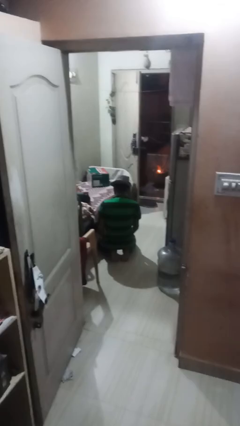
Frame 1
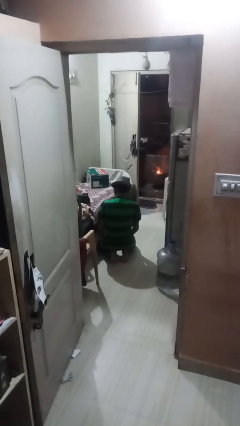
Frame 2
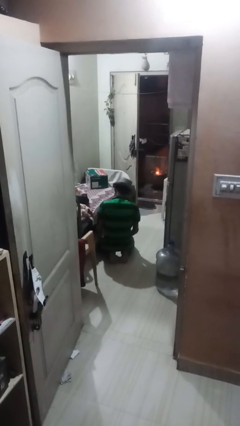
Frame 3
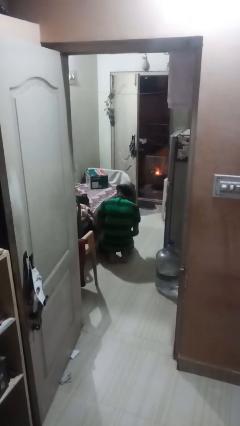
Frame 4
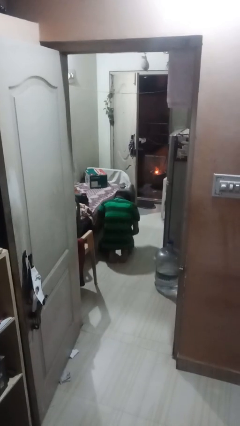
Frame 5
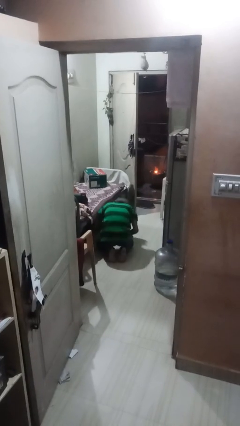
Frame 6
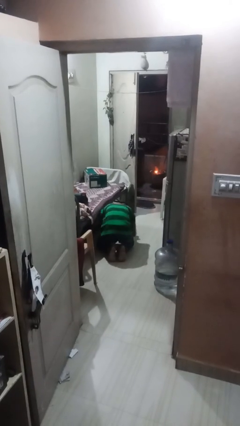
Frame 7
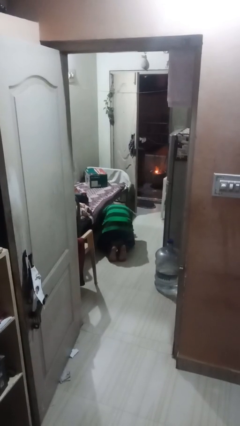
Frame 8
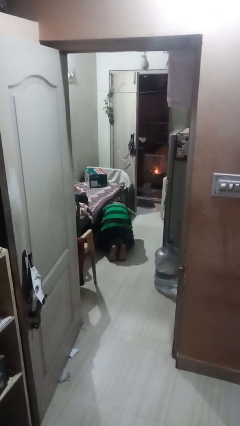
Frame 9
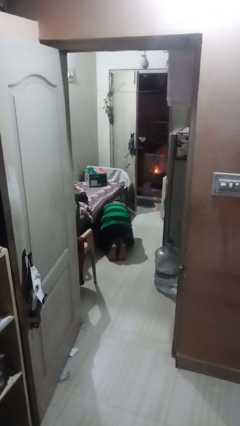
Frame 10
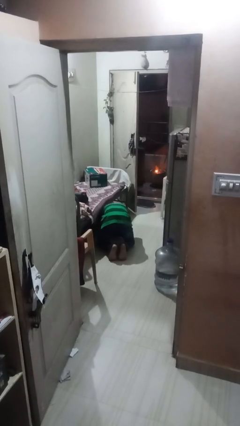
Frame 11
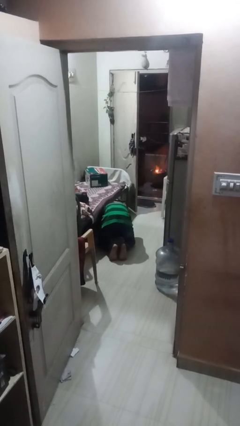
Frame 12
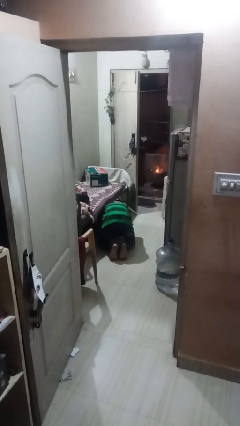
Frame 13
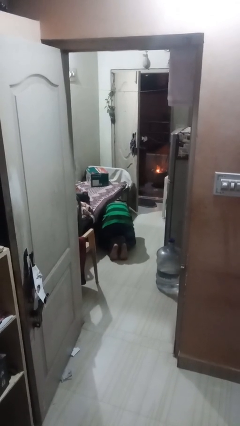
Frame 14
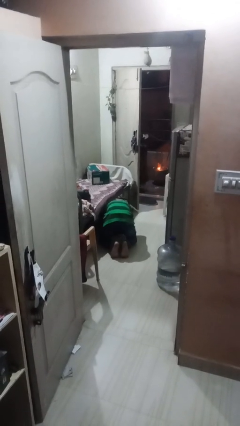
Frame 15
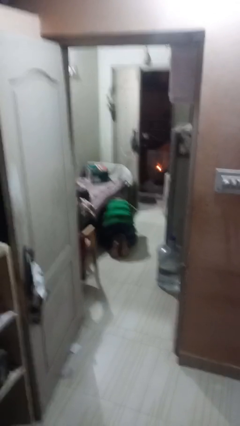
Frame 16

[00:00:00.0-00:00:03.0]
person searches under bed

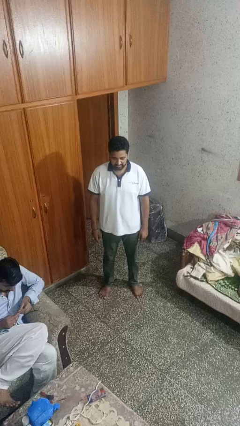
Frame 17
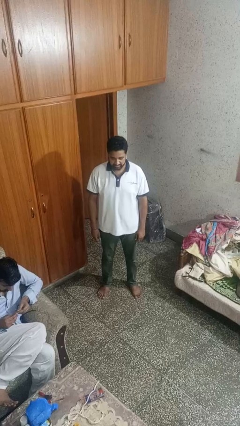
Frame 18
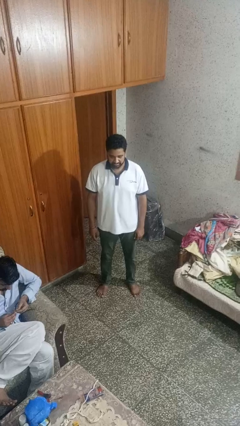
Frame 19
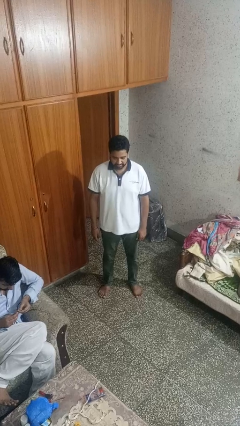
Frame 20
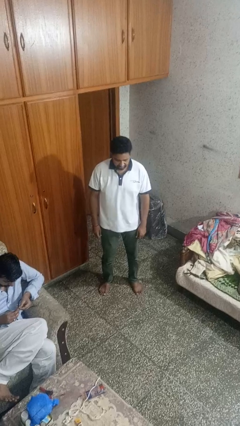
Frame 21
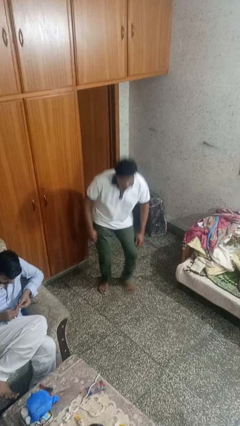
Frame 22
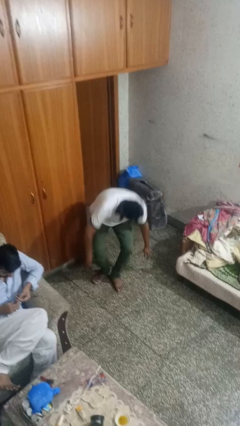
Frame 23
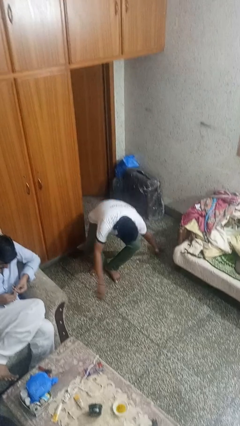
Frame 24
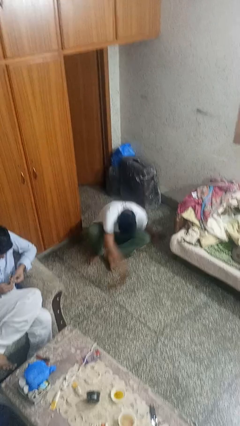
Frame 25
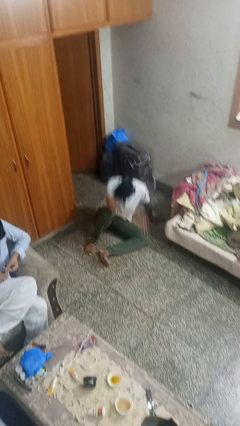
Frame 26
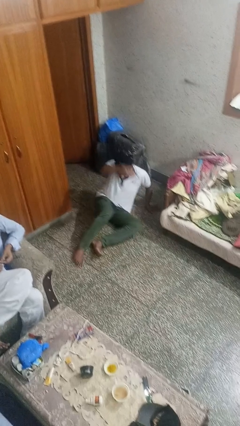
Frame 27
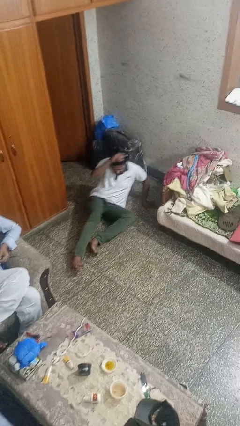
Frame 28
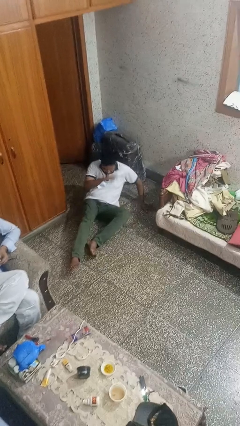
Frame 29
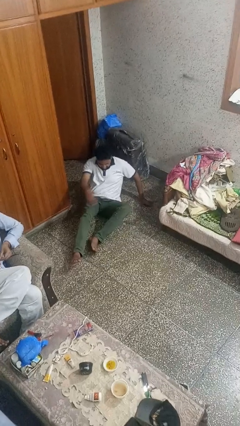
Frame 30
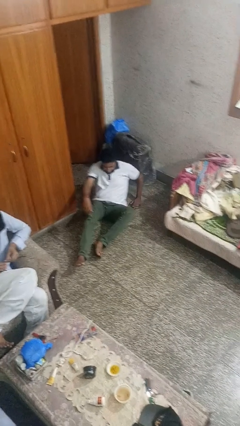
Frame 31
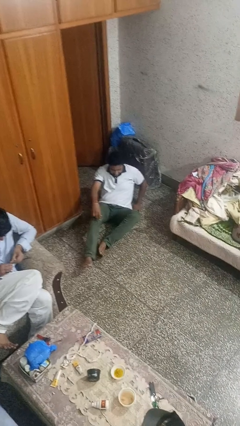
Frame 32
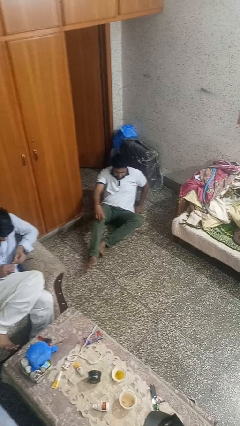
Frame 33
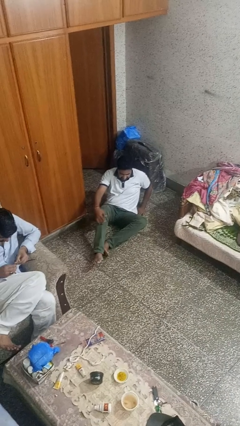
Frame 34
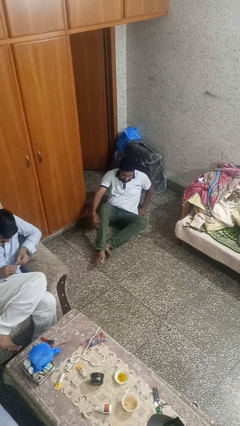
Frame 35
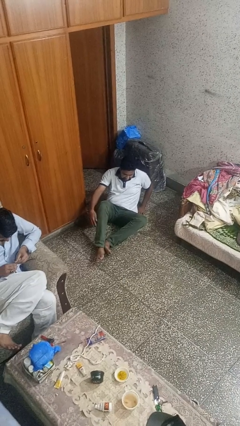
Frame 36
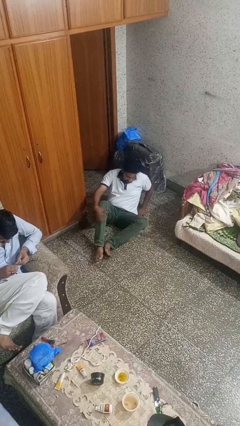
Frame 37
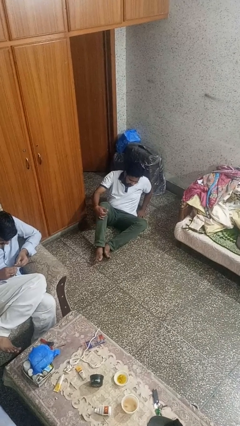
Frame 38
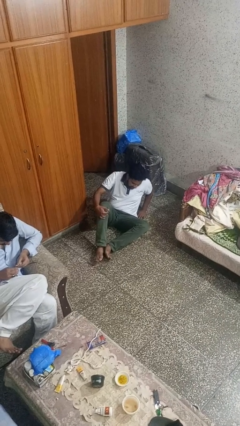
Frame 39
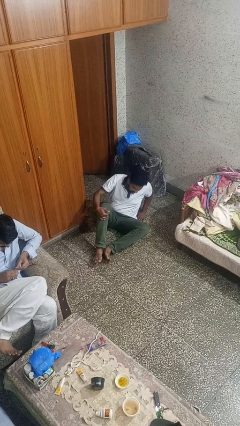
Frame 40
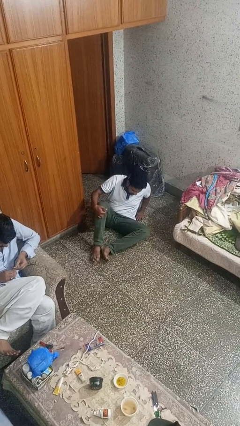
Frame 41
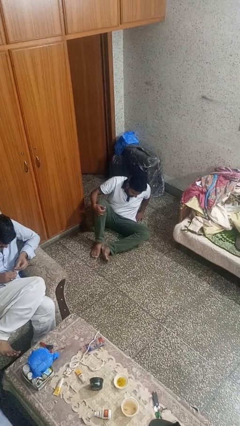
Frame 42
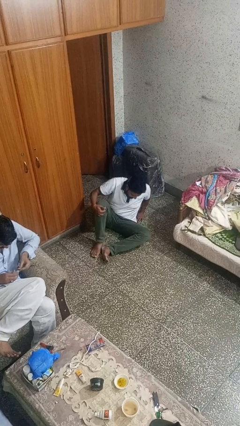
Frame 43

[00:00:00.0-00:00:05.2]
person falls while standing

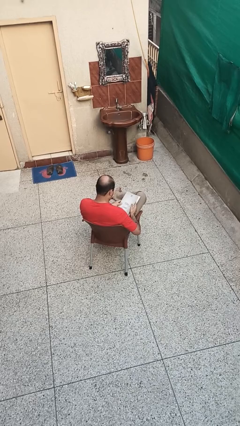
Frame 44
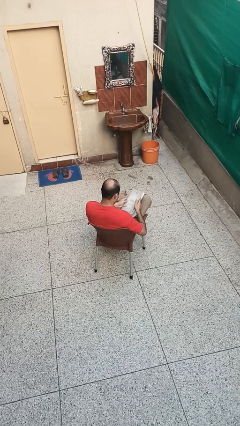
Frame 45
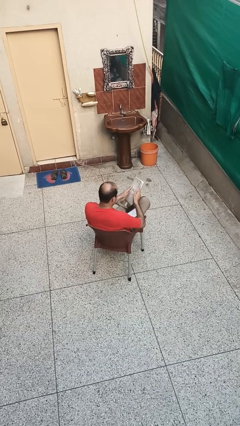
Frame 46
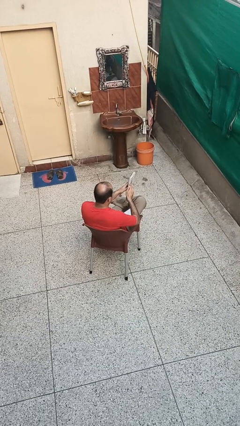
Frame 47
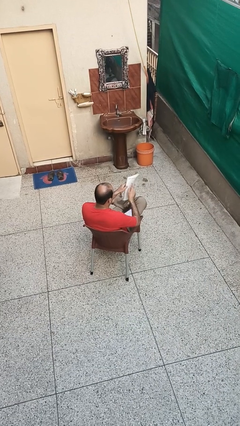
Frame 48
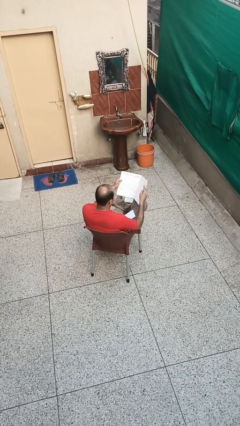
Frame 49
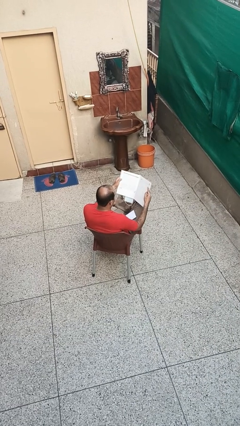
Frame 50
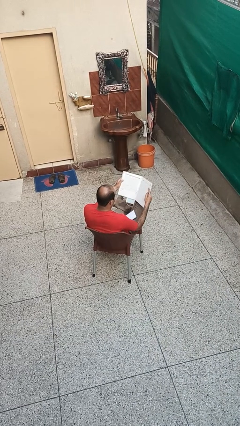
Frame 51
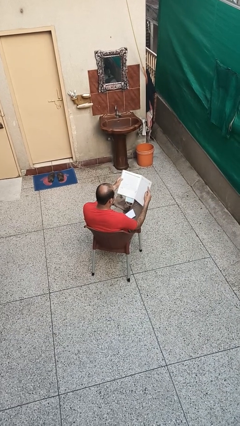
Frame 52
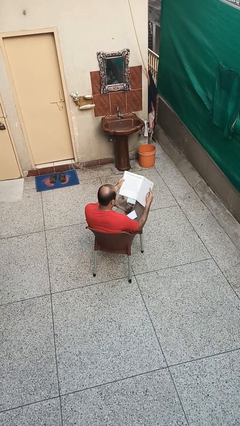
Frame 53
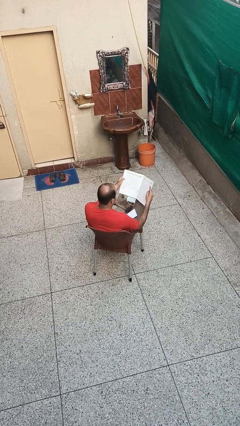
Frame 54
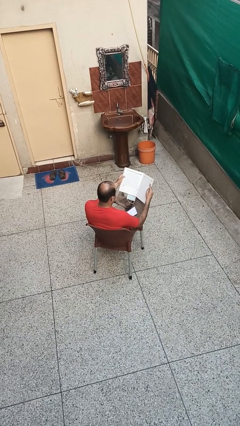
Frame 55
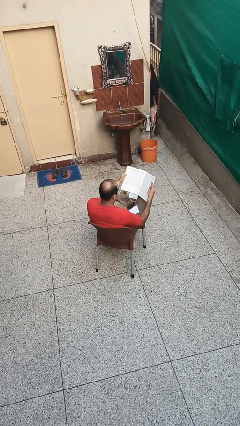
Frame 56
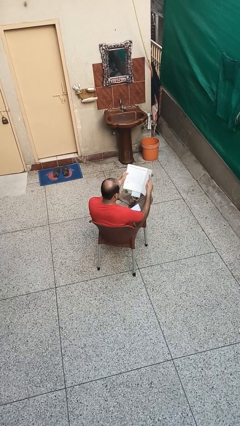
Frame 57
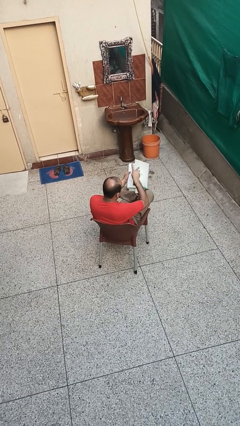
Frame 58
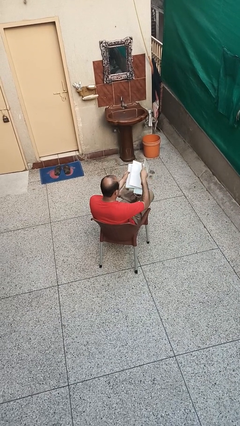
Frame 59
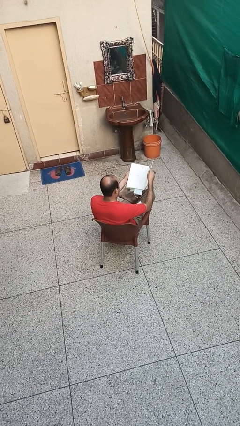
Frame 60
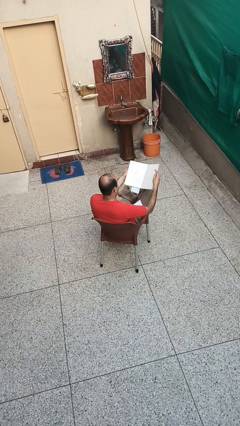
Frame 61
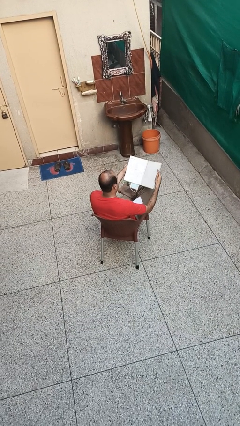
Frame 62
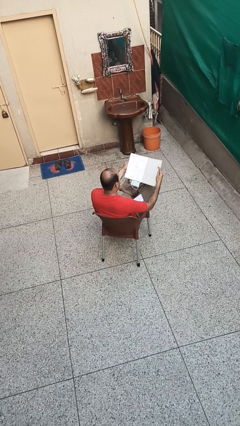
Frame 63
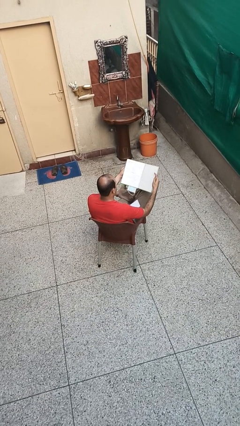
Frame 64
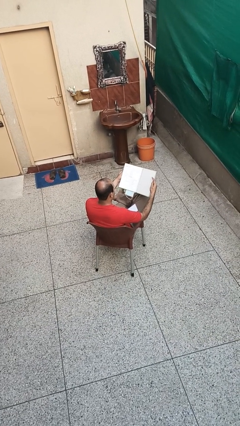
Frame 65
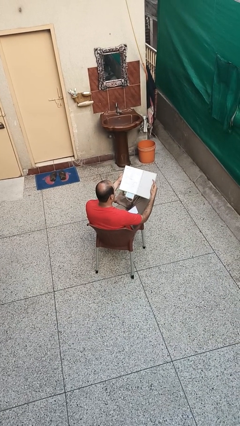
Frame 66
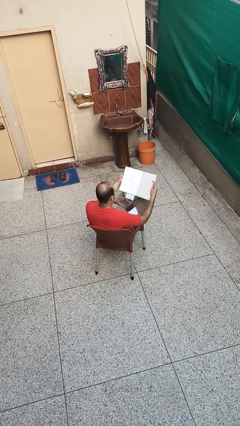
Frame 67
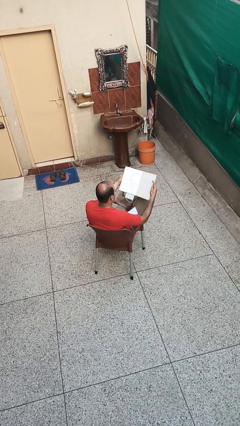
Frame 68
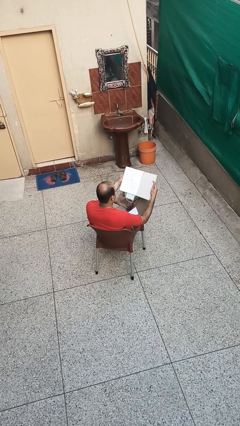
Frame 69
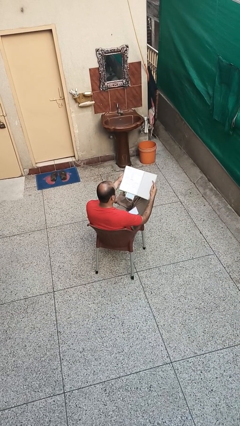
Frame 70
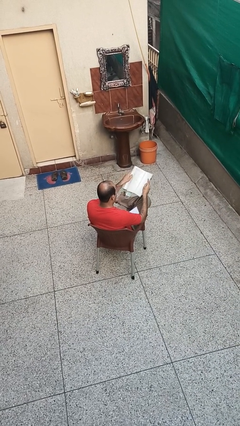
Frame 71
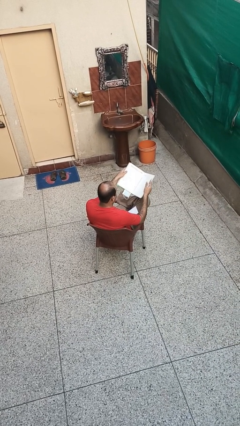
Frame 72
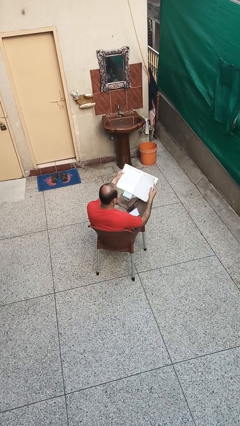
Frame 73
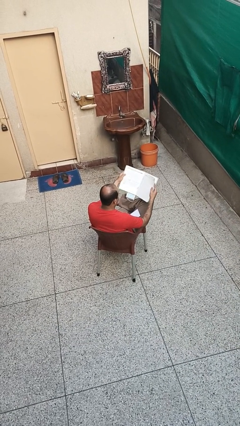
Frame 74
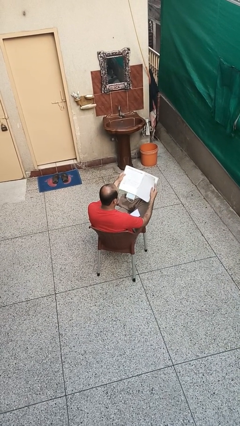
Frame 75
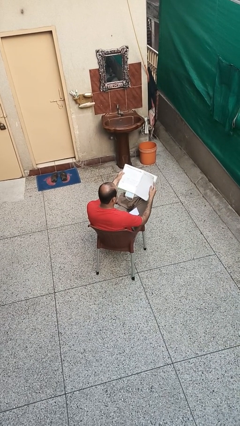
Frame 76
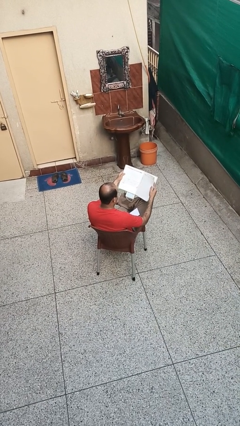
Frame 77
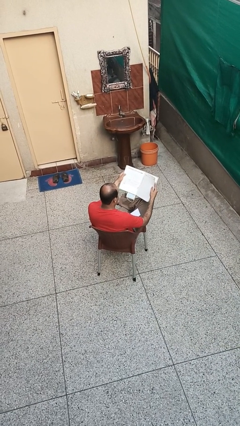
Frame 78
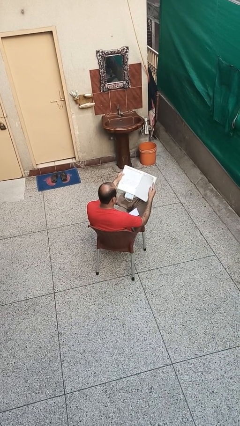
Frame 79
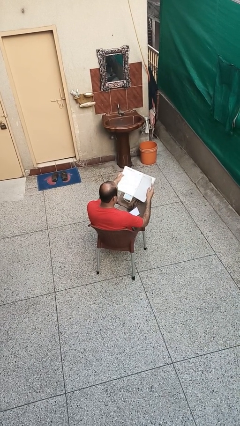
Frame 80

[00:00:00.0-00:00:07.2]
person reads book

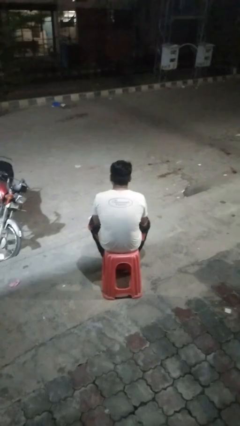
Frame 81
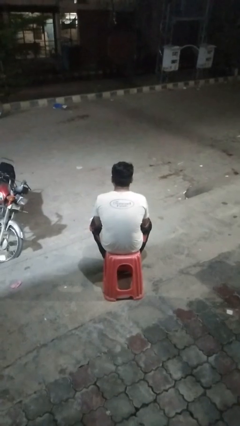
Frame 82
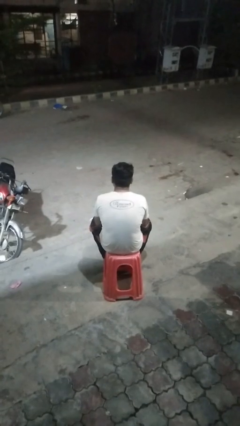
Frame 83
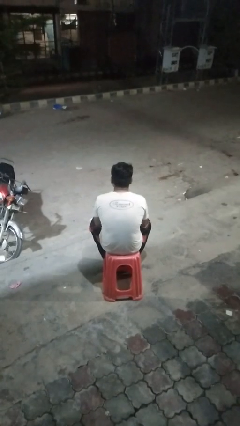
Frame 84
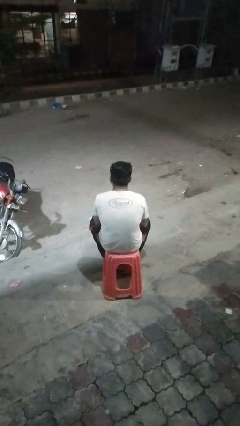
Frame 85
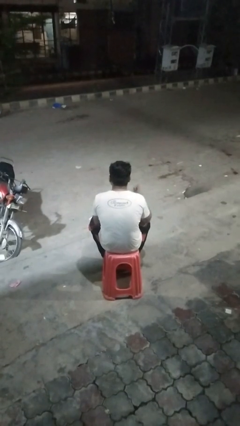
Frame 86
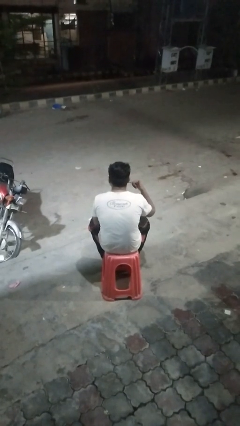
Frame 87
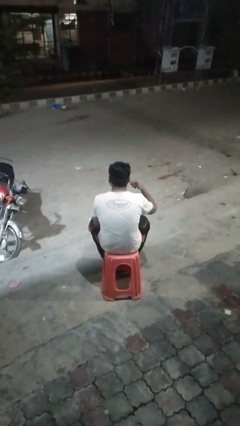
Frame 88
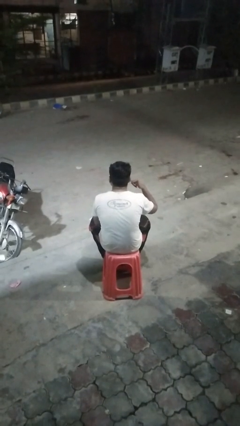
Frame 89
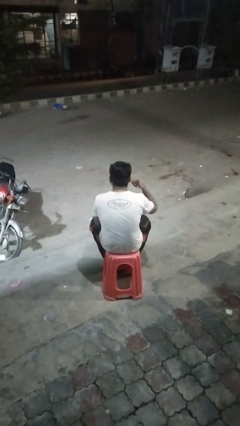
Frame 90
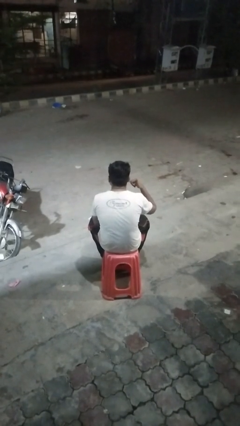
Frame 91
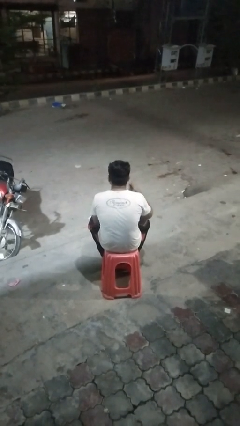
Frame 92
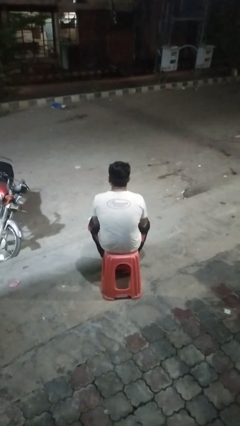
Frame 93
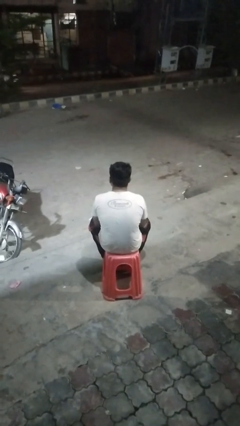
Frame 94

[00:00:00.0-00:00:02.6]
person gestures call me
